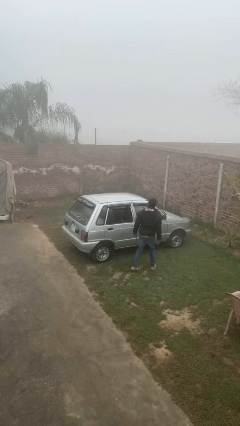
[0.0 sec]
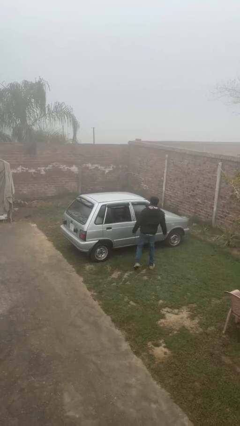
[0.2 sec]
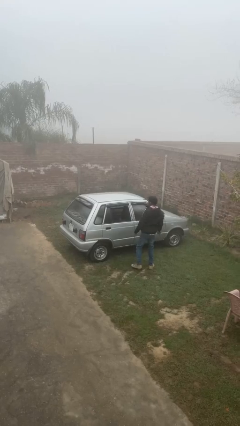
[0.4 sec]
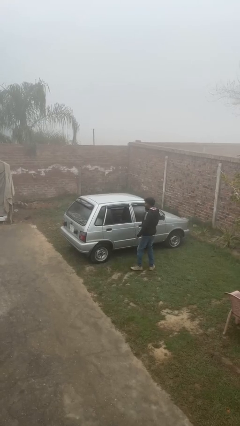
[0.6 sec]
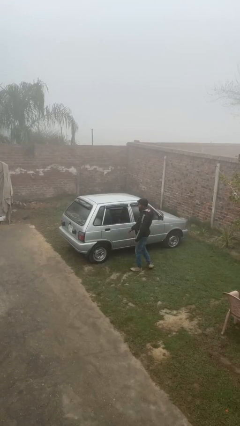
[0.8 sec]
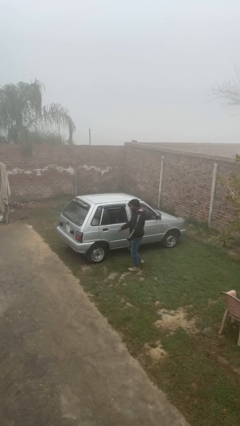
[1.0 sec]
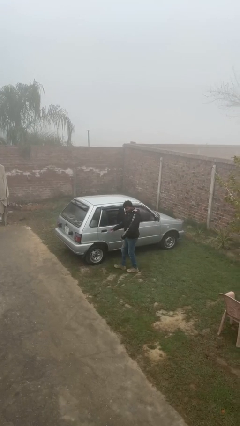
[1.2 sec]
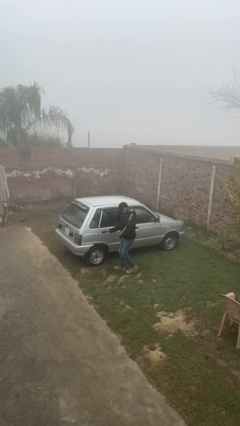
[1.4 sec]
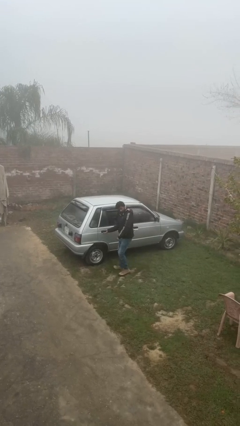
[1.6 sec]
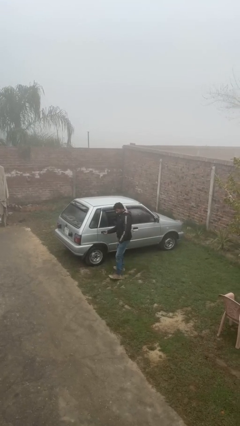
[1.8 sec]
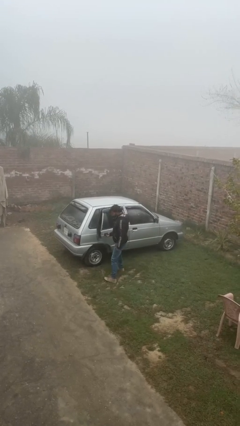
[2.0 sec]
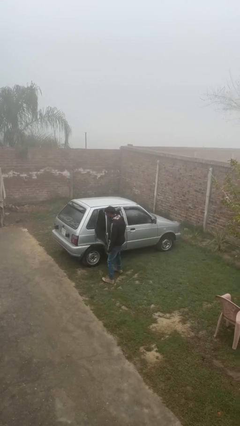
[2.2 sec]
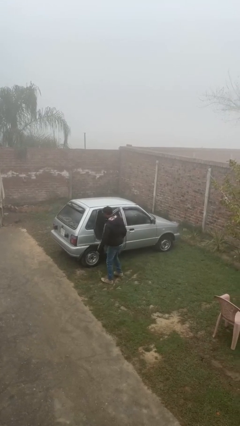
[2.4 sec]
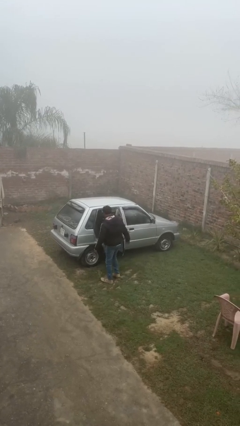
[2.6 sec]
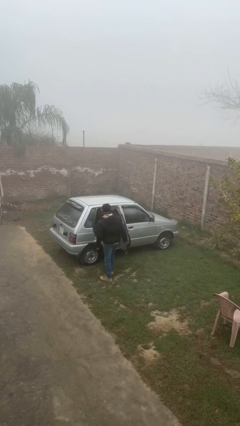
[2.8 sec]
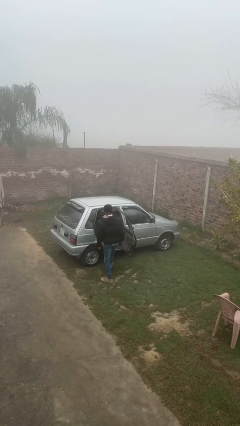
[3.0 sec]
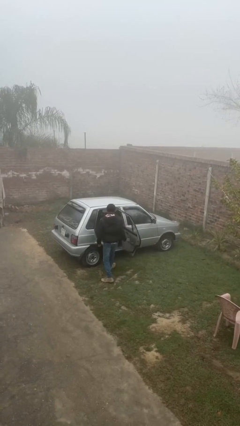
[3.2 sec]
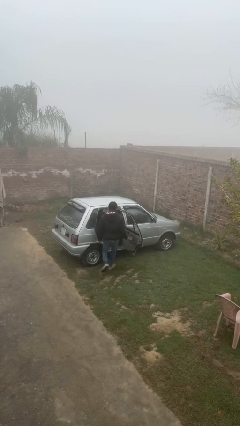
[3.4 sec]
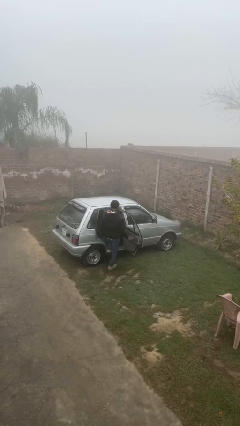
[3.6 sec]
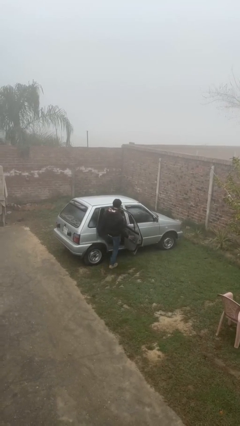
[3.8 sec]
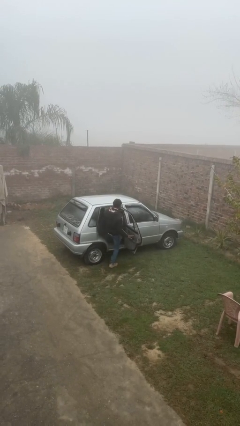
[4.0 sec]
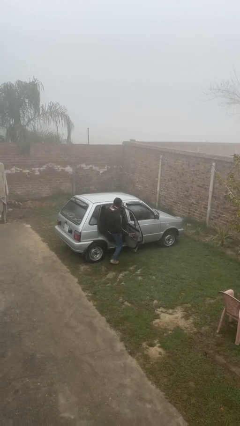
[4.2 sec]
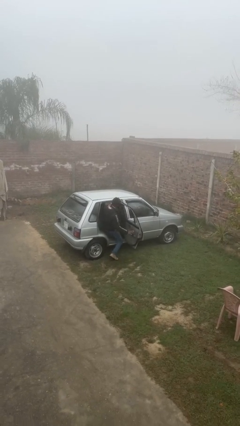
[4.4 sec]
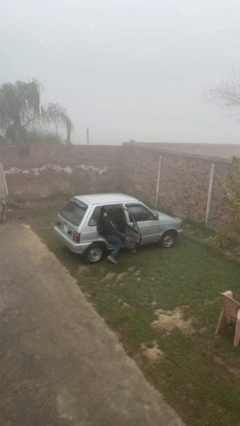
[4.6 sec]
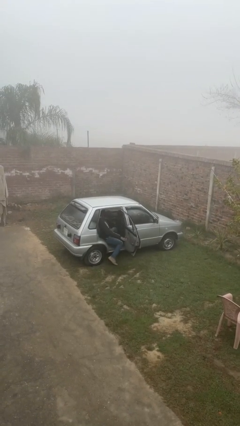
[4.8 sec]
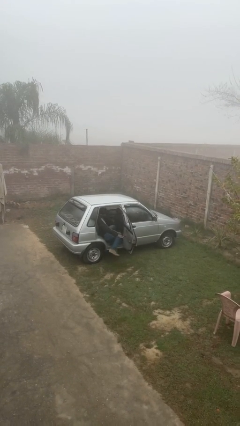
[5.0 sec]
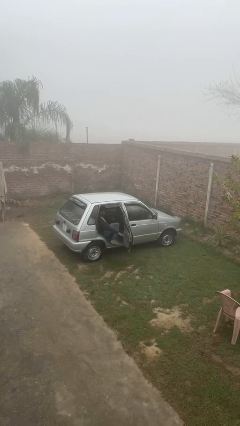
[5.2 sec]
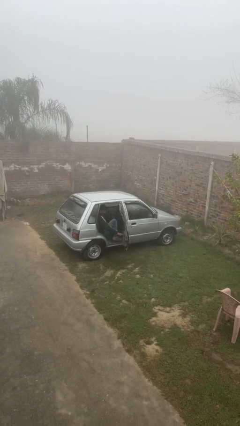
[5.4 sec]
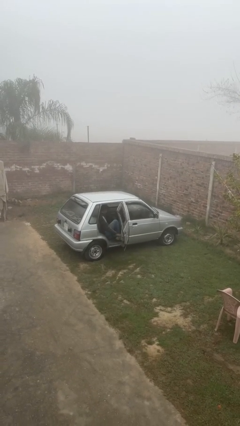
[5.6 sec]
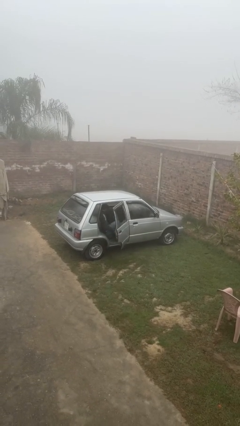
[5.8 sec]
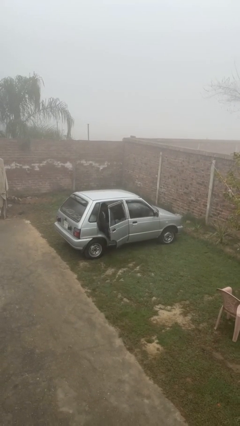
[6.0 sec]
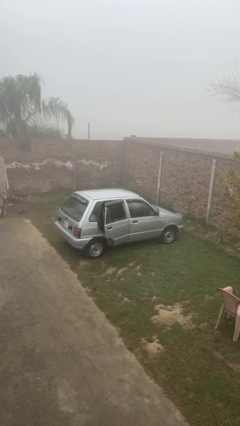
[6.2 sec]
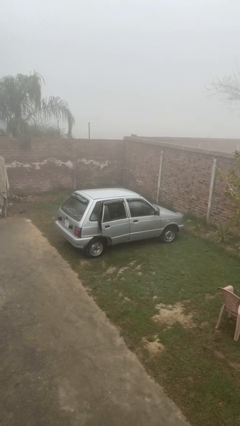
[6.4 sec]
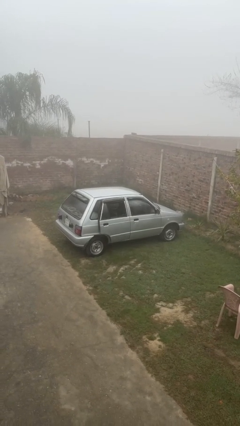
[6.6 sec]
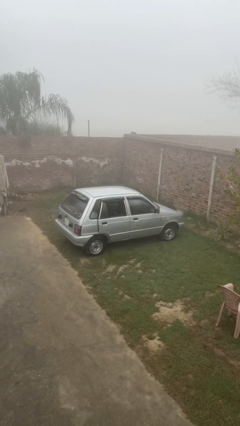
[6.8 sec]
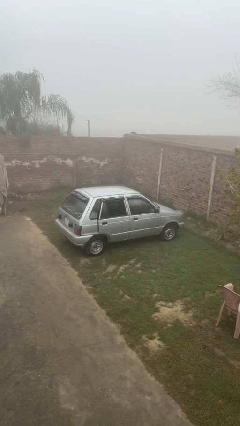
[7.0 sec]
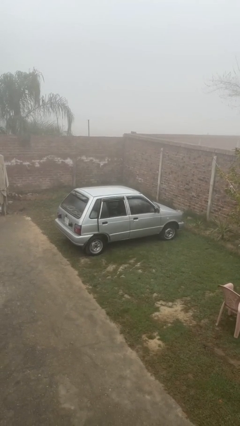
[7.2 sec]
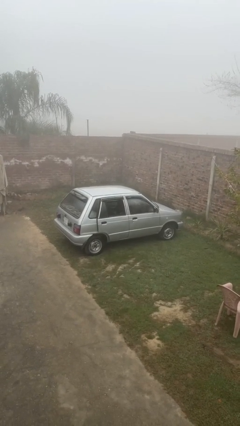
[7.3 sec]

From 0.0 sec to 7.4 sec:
car picks up person

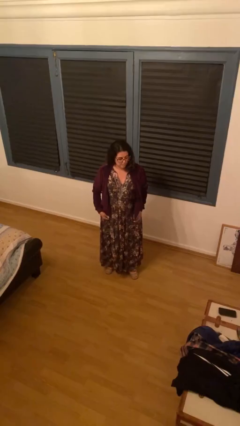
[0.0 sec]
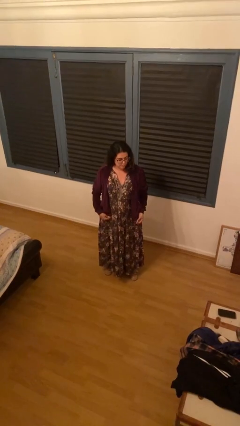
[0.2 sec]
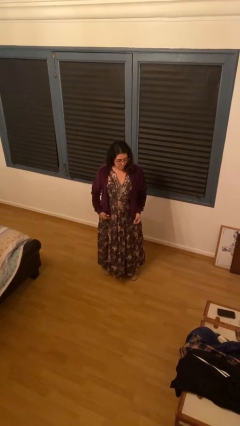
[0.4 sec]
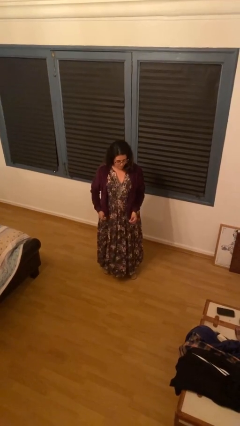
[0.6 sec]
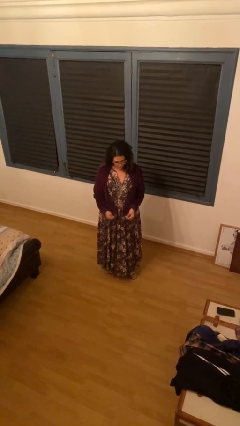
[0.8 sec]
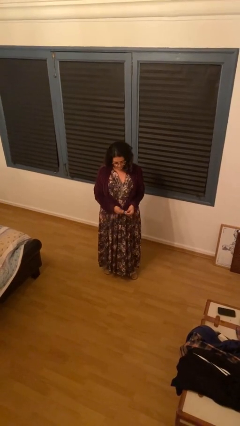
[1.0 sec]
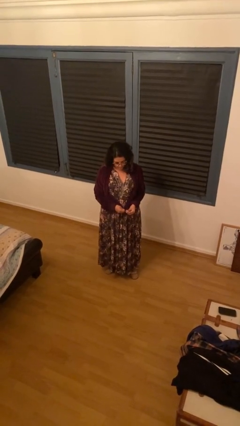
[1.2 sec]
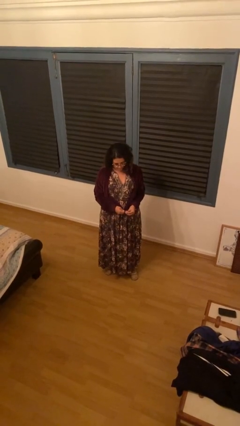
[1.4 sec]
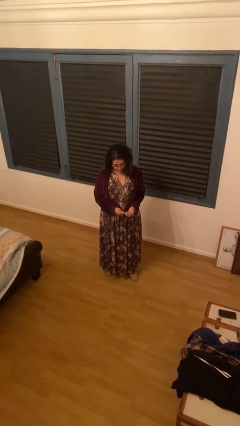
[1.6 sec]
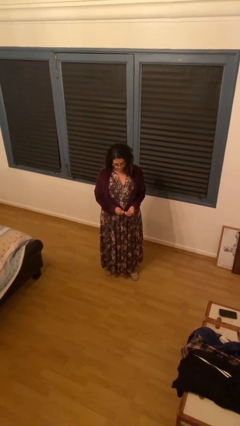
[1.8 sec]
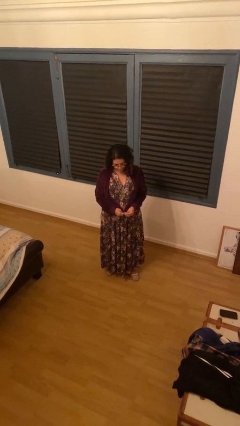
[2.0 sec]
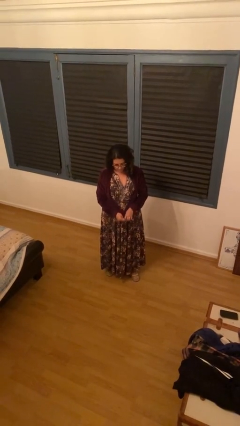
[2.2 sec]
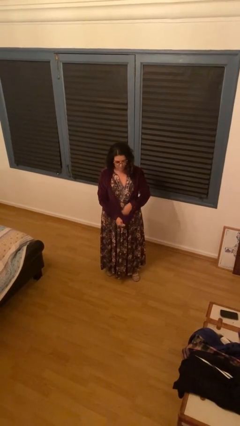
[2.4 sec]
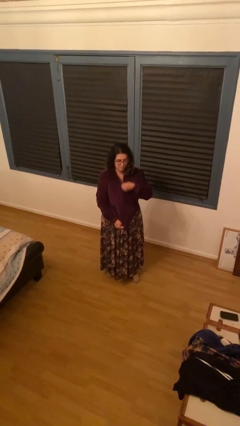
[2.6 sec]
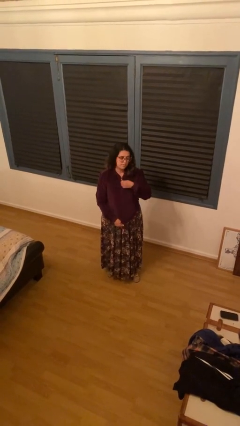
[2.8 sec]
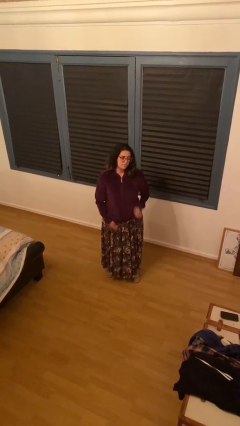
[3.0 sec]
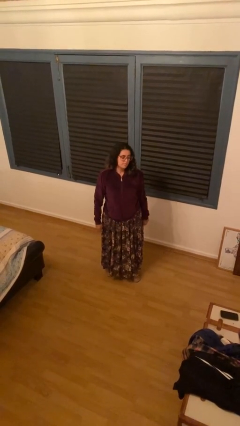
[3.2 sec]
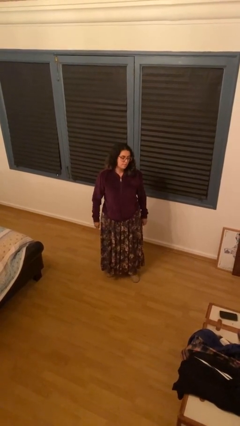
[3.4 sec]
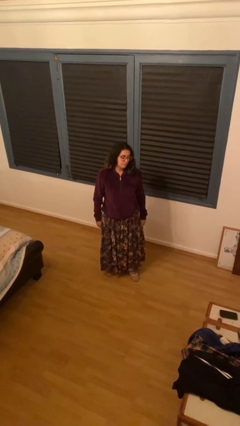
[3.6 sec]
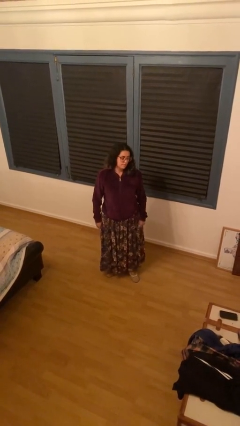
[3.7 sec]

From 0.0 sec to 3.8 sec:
person zips up jacket

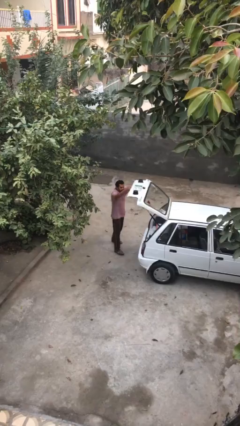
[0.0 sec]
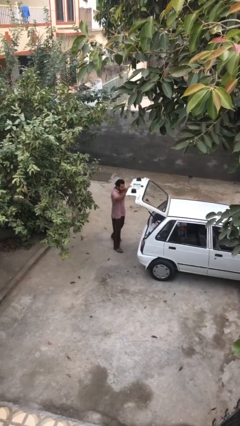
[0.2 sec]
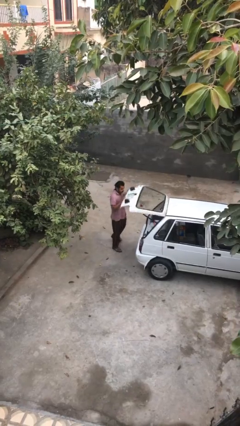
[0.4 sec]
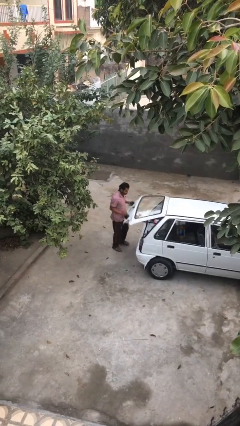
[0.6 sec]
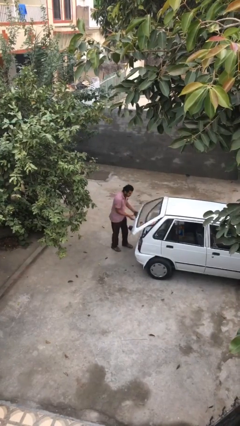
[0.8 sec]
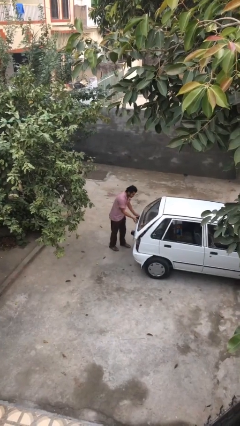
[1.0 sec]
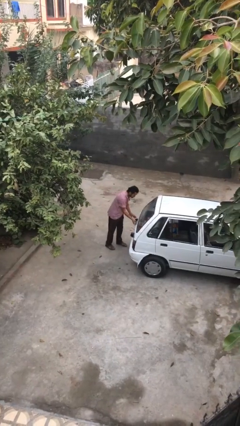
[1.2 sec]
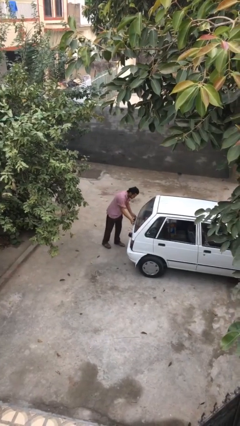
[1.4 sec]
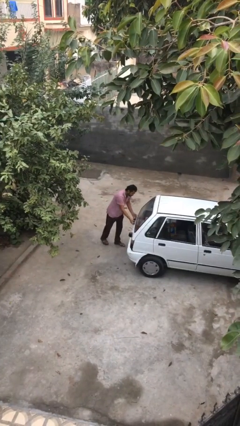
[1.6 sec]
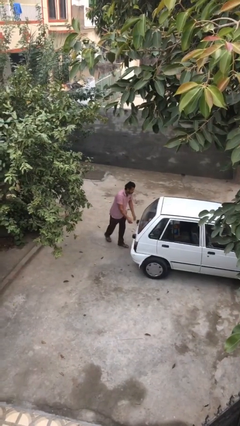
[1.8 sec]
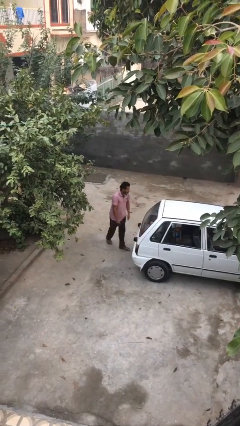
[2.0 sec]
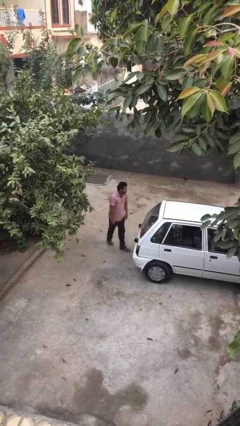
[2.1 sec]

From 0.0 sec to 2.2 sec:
person closes car trunk

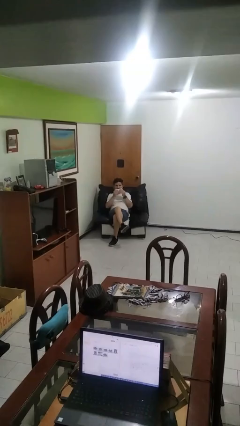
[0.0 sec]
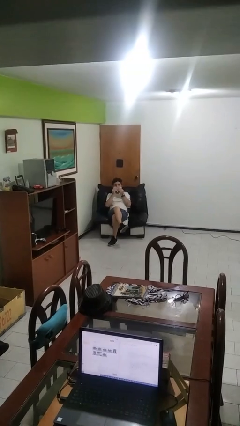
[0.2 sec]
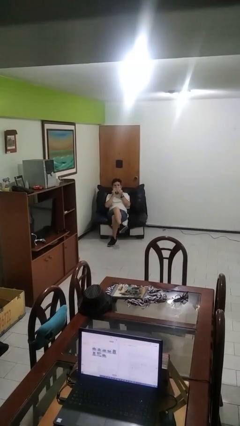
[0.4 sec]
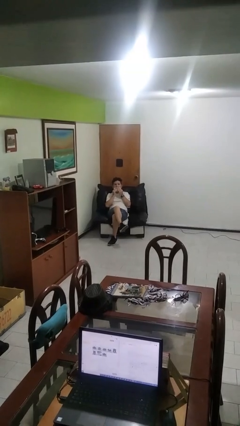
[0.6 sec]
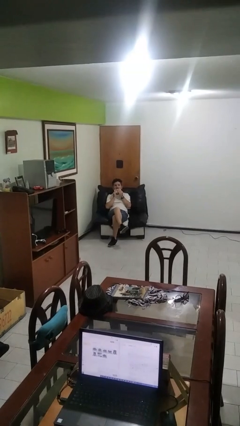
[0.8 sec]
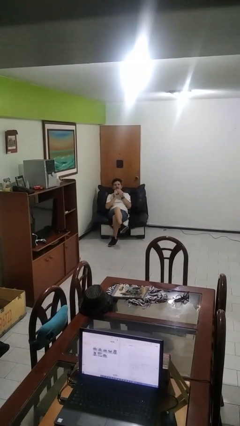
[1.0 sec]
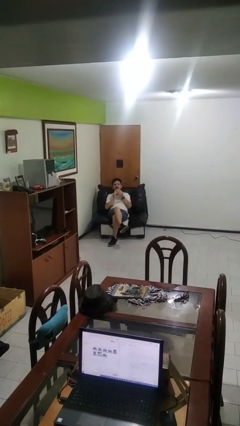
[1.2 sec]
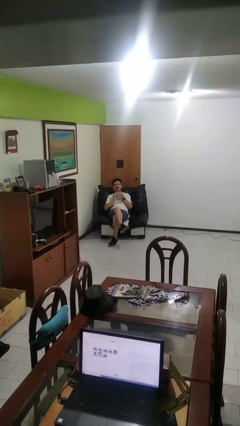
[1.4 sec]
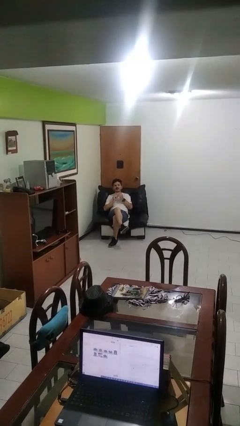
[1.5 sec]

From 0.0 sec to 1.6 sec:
person wipes mouth with napkin

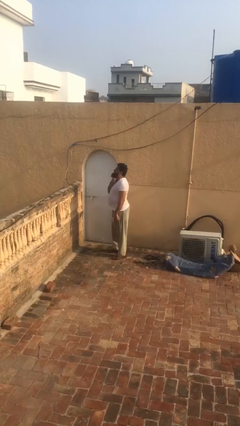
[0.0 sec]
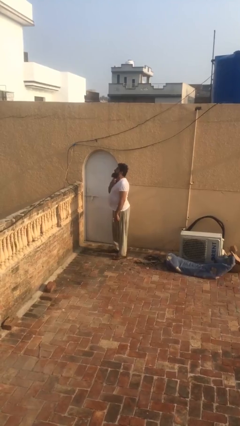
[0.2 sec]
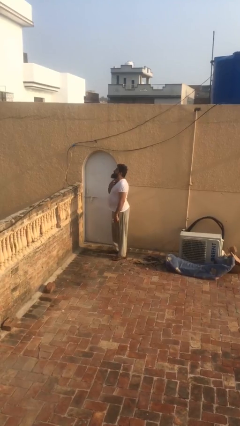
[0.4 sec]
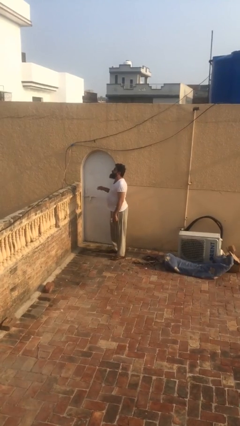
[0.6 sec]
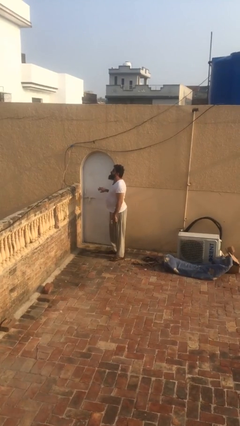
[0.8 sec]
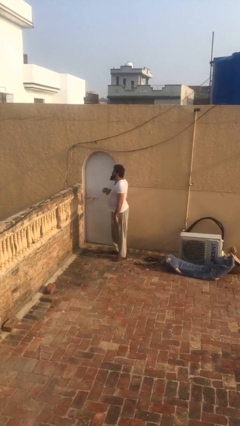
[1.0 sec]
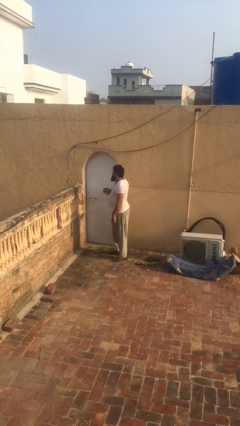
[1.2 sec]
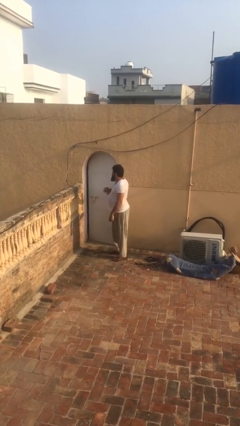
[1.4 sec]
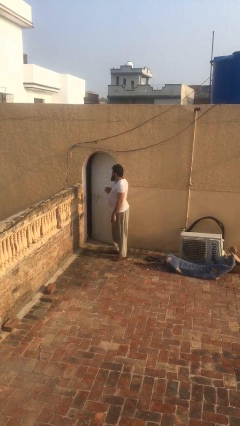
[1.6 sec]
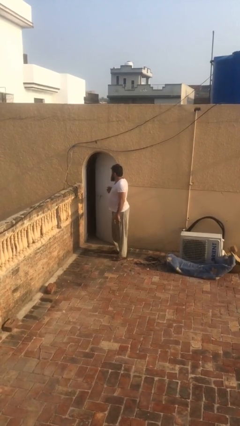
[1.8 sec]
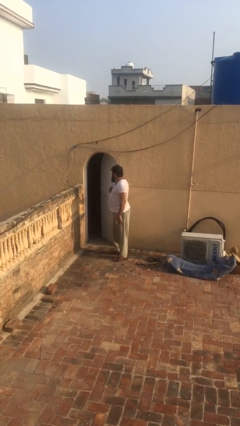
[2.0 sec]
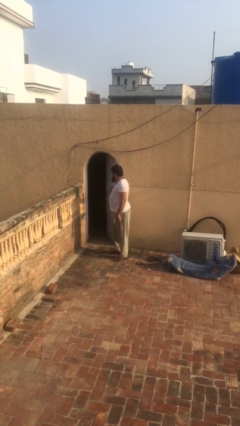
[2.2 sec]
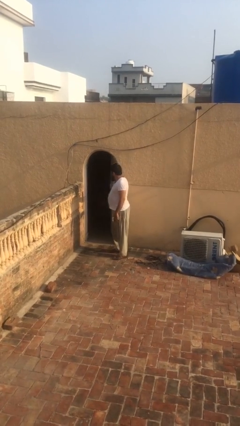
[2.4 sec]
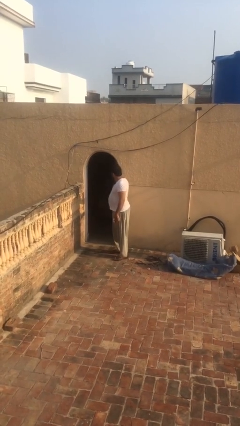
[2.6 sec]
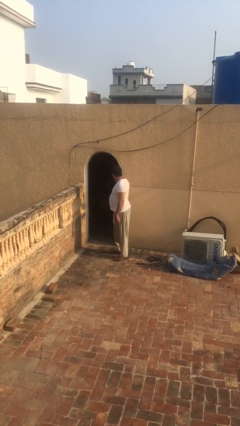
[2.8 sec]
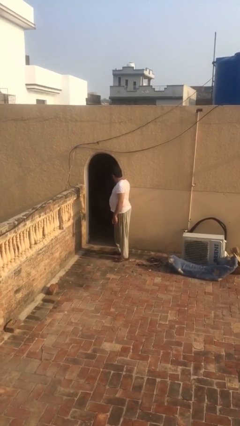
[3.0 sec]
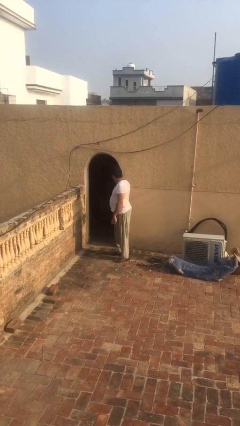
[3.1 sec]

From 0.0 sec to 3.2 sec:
person opens facility door
